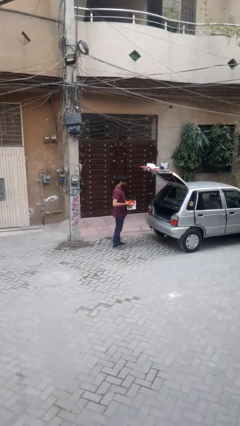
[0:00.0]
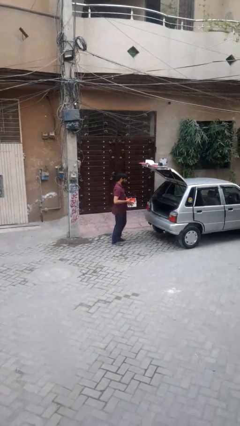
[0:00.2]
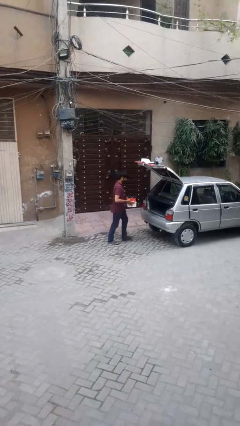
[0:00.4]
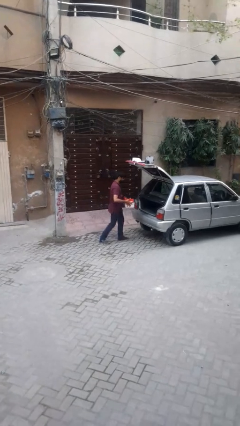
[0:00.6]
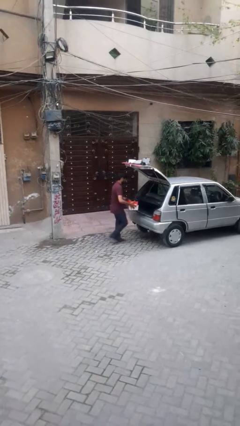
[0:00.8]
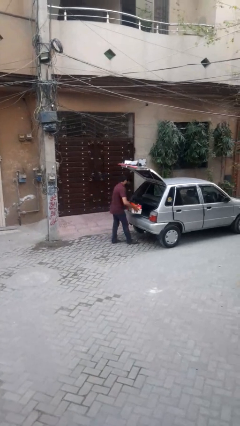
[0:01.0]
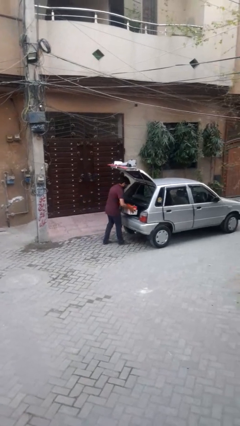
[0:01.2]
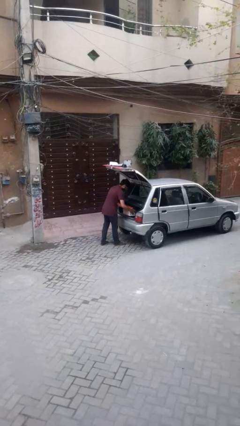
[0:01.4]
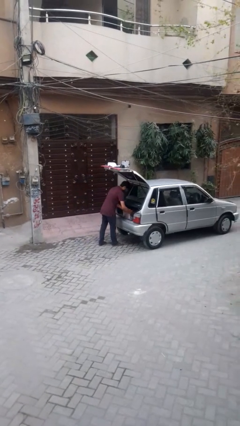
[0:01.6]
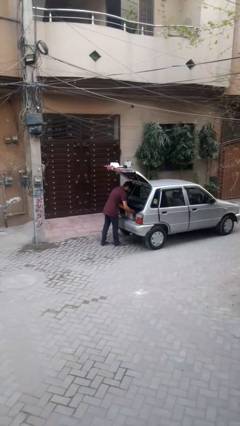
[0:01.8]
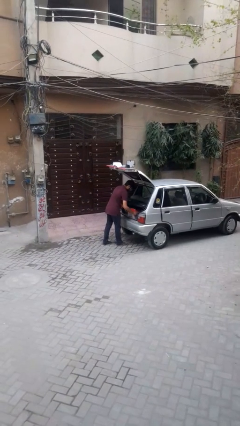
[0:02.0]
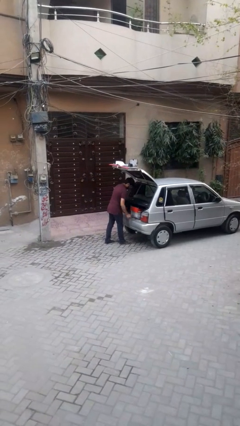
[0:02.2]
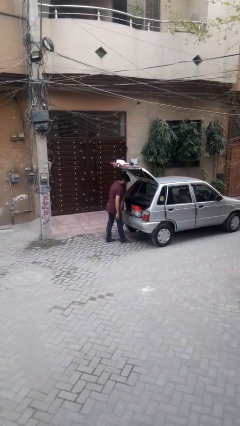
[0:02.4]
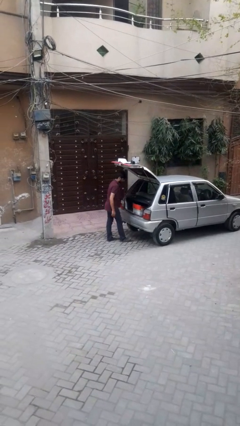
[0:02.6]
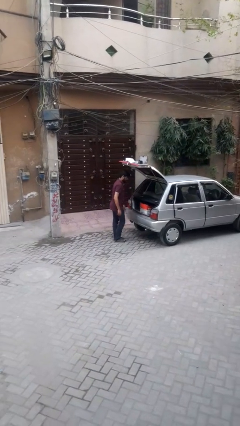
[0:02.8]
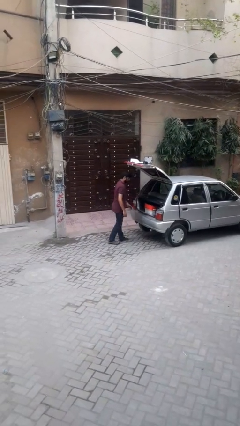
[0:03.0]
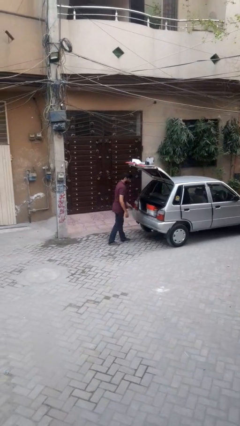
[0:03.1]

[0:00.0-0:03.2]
person loads car

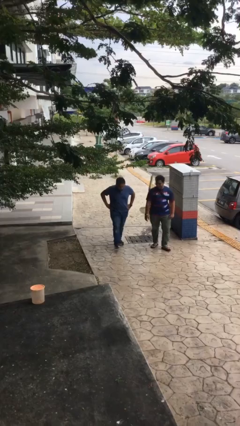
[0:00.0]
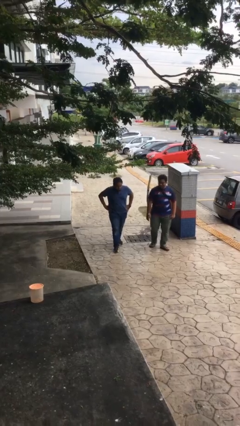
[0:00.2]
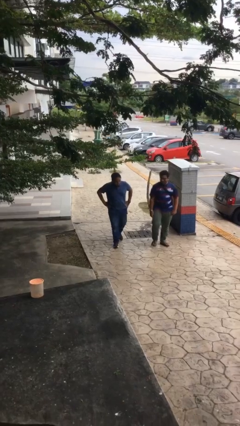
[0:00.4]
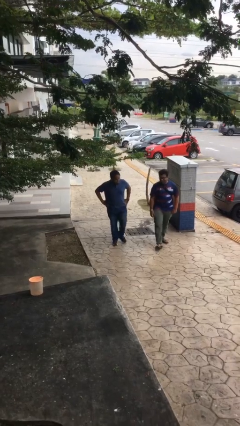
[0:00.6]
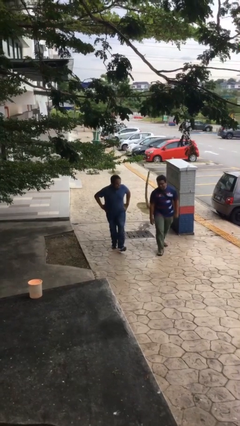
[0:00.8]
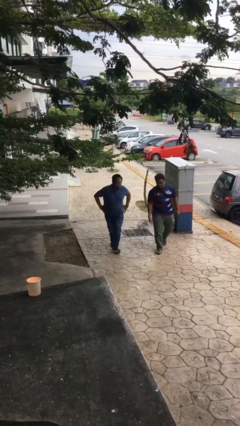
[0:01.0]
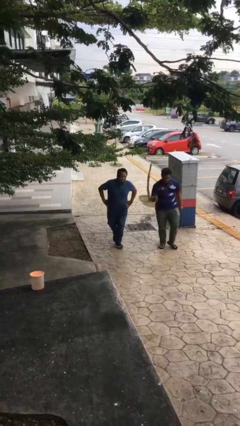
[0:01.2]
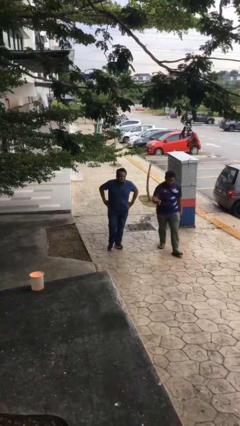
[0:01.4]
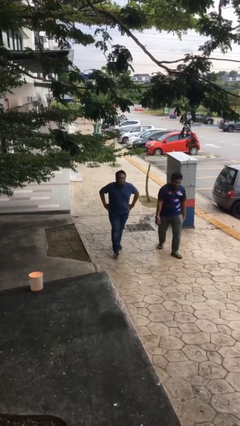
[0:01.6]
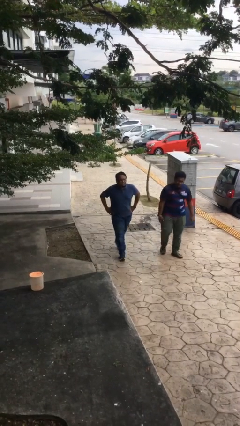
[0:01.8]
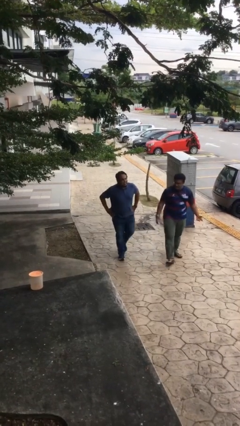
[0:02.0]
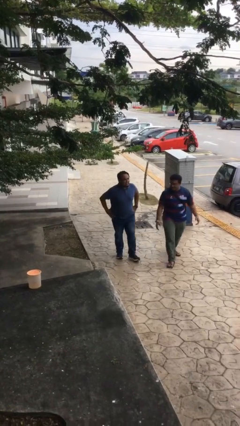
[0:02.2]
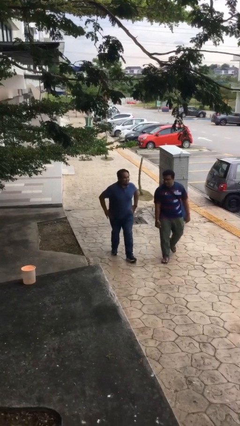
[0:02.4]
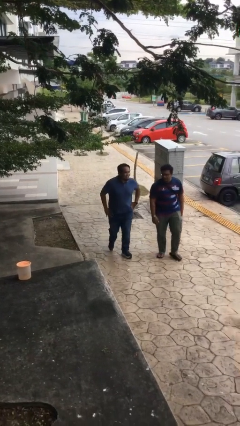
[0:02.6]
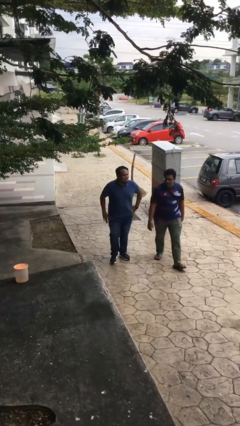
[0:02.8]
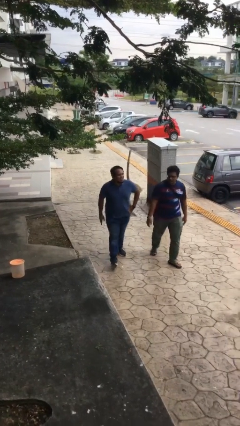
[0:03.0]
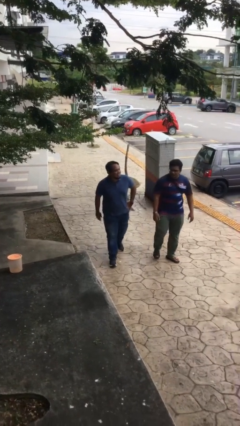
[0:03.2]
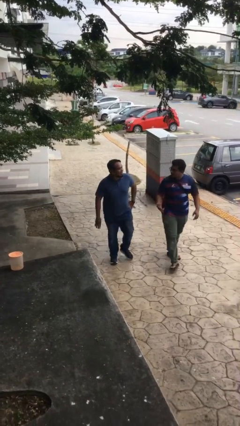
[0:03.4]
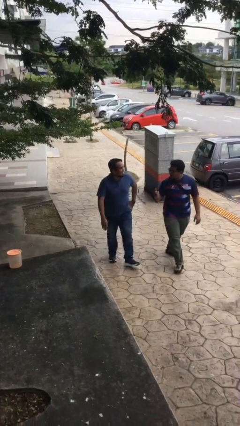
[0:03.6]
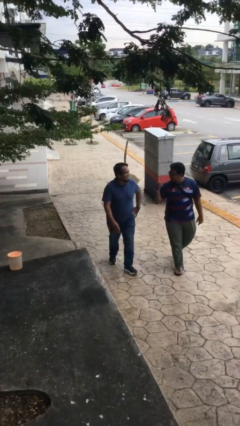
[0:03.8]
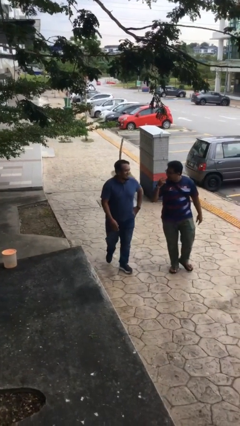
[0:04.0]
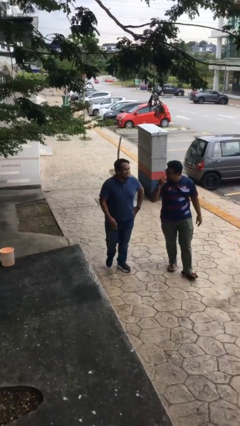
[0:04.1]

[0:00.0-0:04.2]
person talks to person

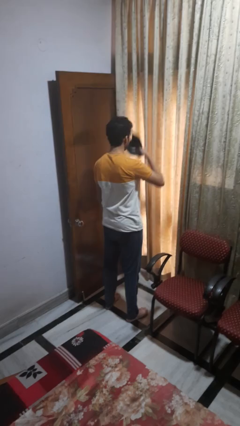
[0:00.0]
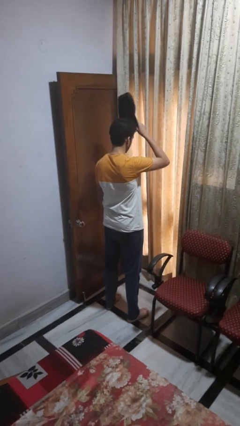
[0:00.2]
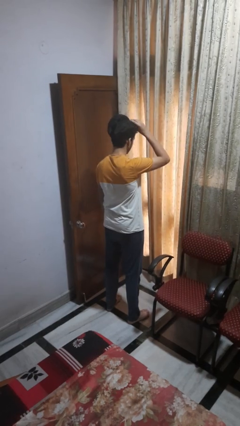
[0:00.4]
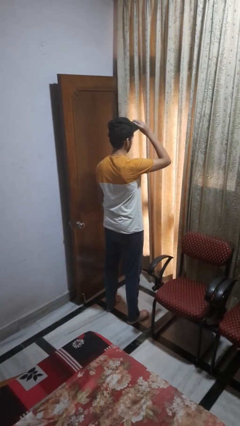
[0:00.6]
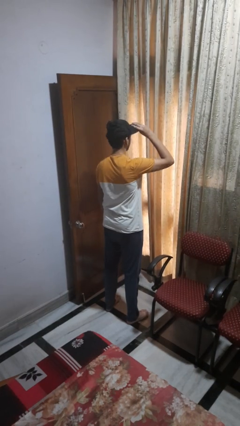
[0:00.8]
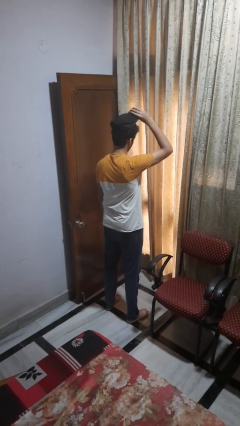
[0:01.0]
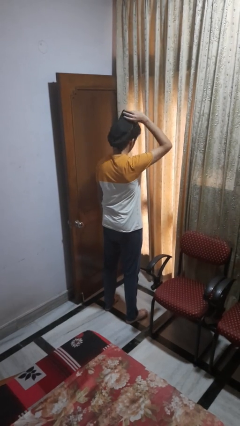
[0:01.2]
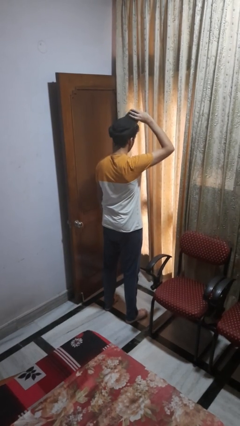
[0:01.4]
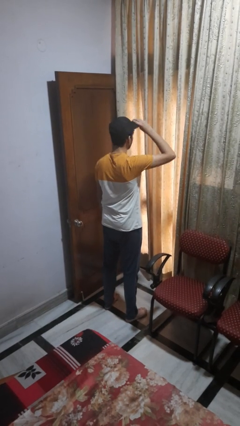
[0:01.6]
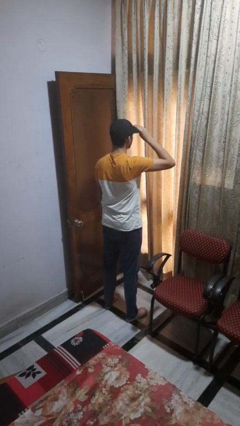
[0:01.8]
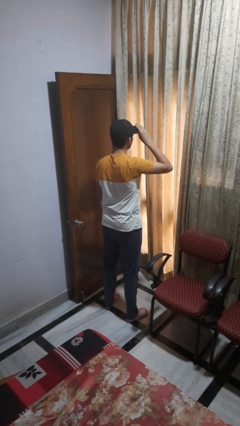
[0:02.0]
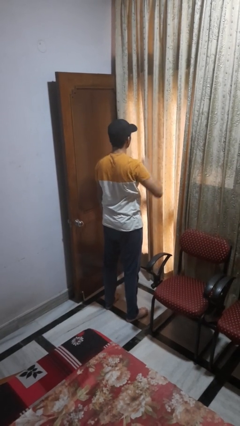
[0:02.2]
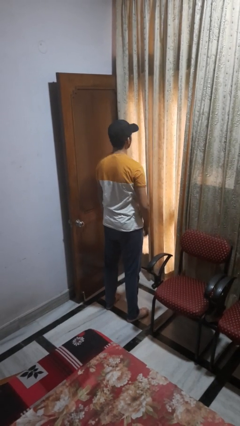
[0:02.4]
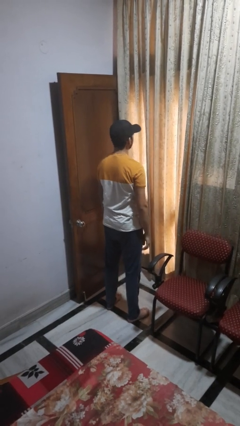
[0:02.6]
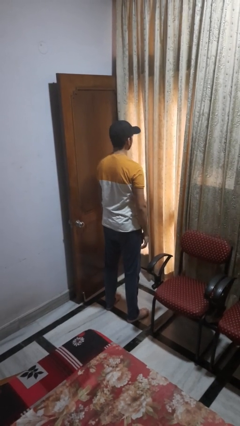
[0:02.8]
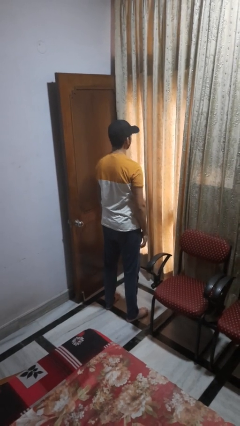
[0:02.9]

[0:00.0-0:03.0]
person puts on hat

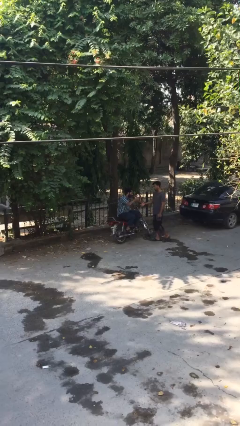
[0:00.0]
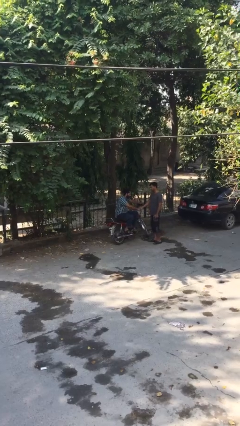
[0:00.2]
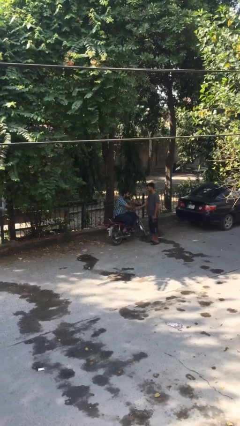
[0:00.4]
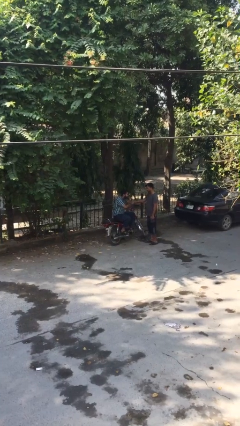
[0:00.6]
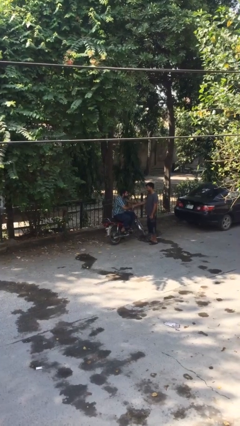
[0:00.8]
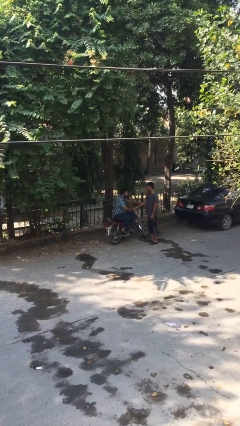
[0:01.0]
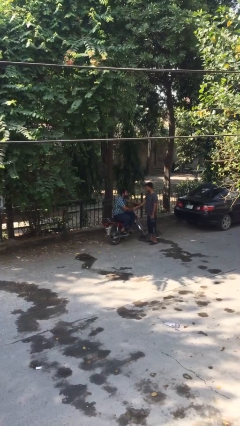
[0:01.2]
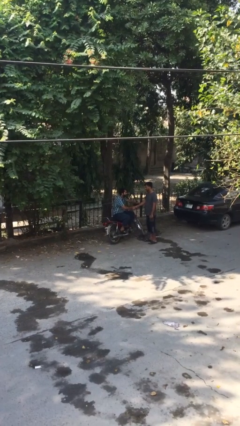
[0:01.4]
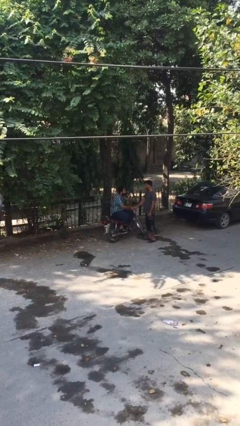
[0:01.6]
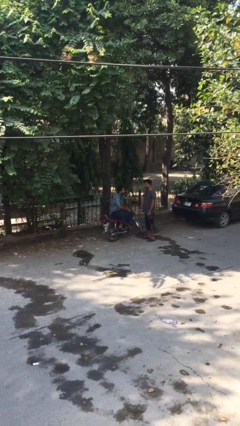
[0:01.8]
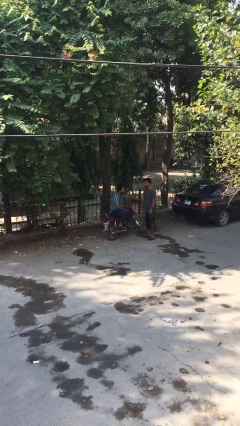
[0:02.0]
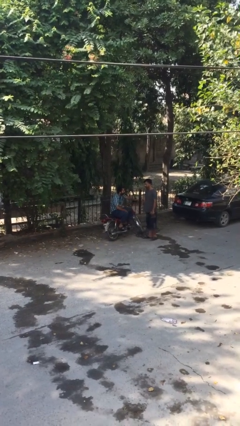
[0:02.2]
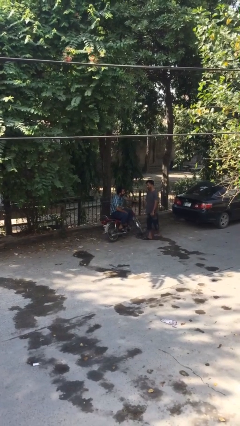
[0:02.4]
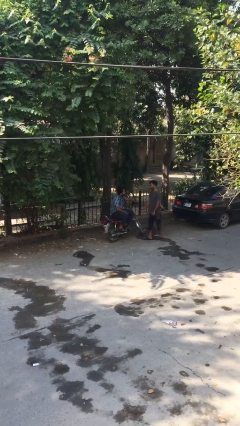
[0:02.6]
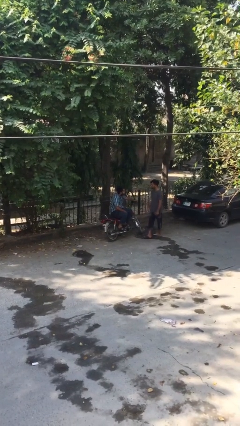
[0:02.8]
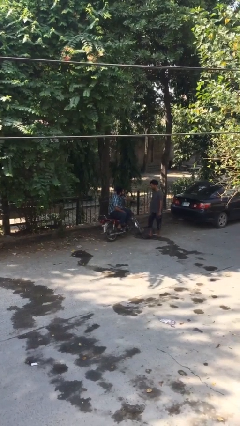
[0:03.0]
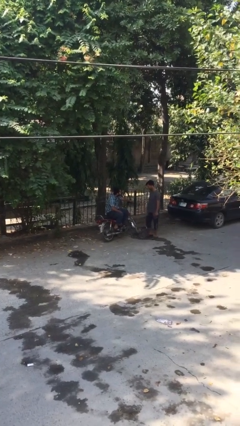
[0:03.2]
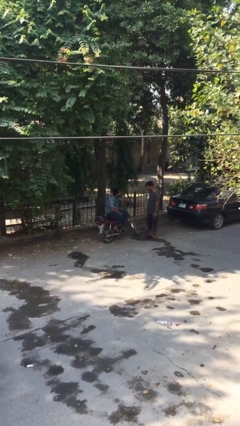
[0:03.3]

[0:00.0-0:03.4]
person shakes hand

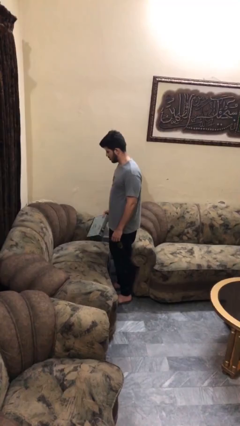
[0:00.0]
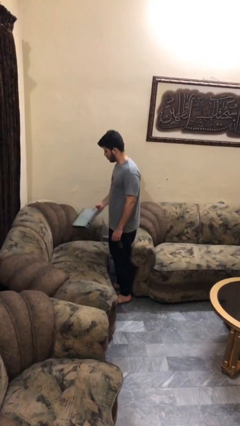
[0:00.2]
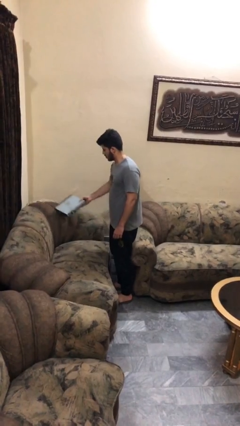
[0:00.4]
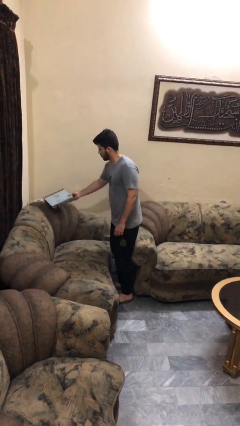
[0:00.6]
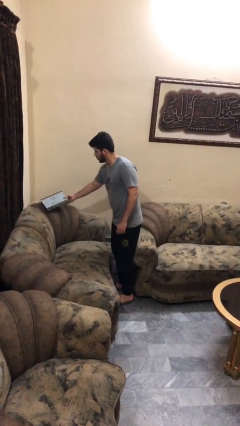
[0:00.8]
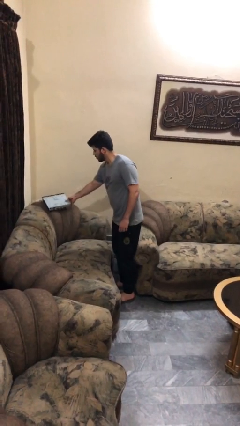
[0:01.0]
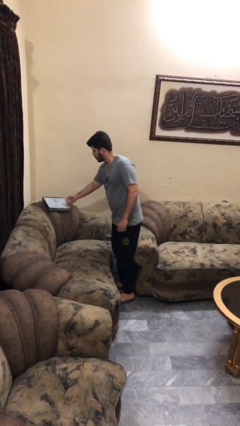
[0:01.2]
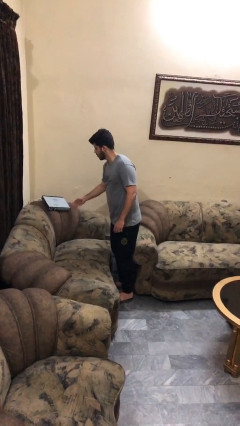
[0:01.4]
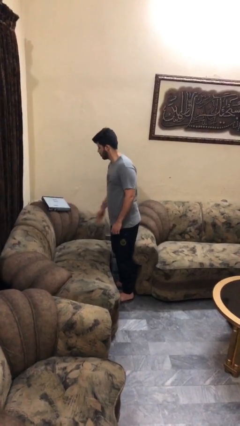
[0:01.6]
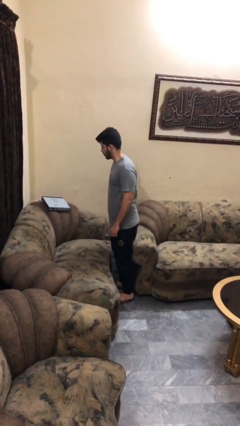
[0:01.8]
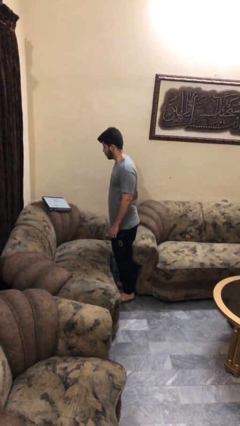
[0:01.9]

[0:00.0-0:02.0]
person puts down object on couch

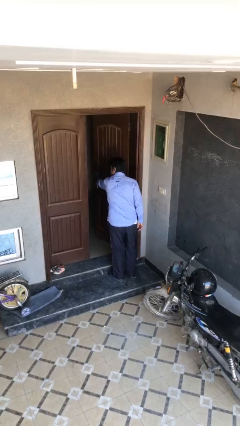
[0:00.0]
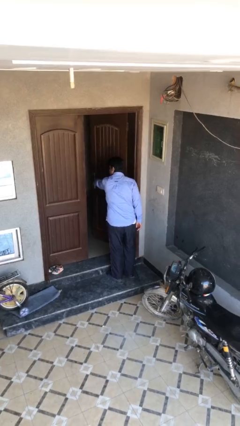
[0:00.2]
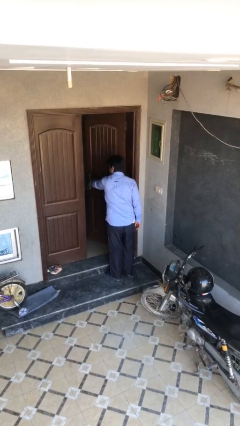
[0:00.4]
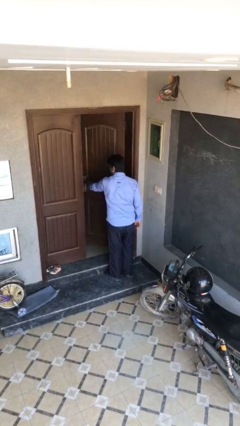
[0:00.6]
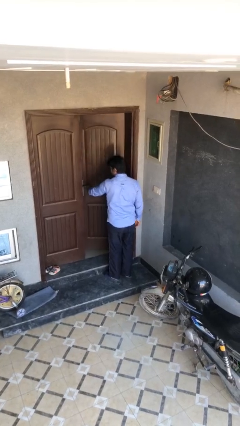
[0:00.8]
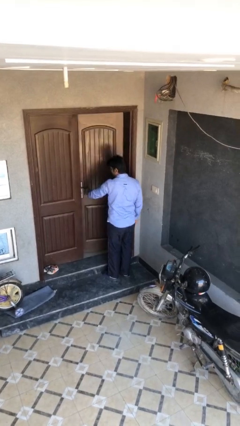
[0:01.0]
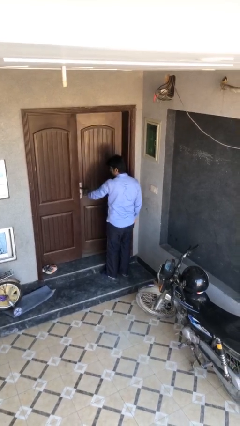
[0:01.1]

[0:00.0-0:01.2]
person closes facility door

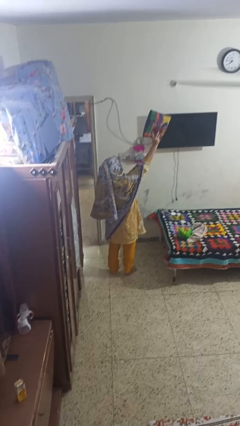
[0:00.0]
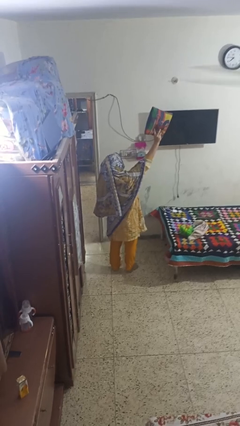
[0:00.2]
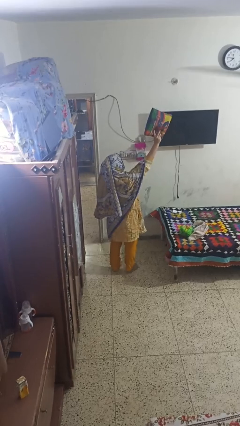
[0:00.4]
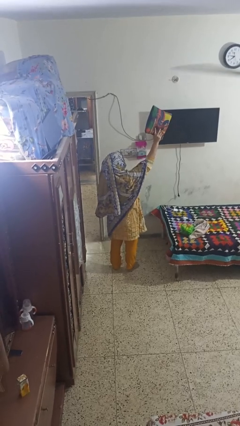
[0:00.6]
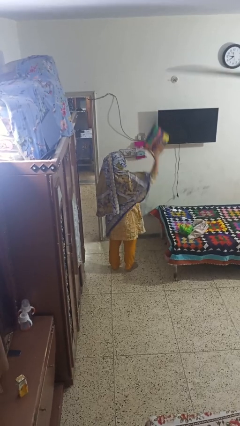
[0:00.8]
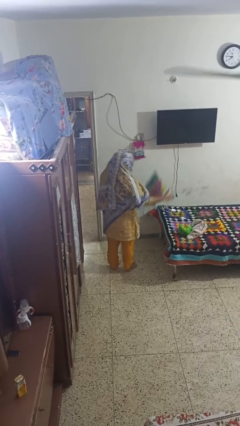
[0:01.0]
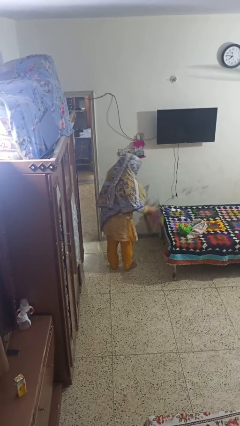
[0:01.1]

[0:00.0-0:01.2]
person drops object
